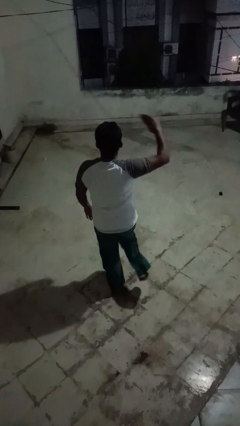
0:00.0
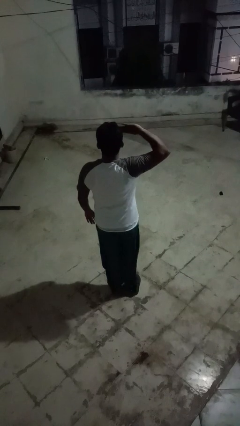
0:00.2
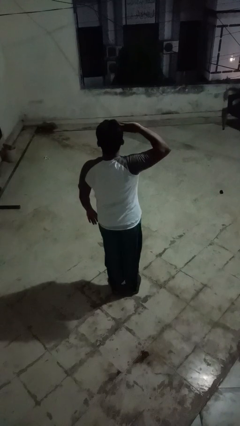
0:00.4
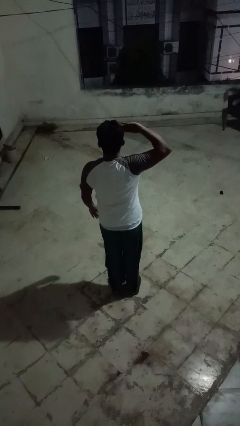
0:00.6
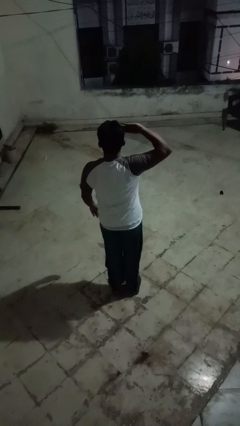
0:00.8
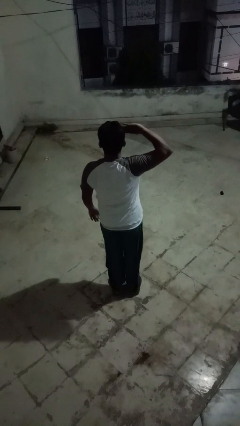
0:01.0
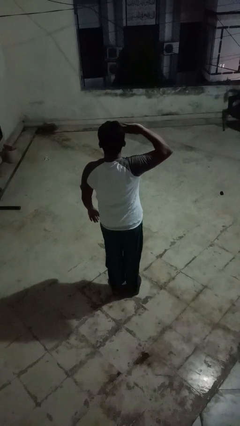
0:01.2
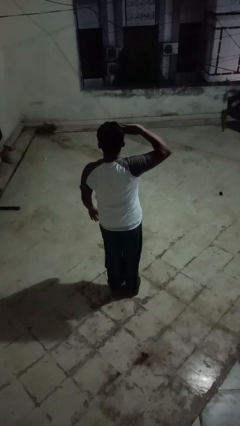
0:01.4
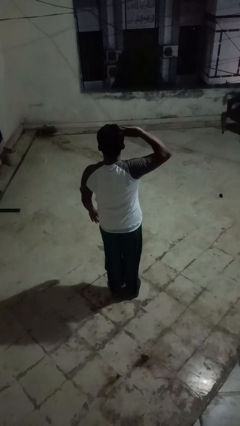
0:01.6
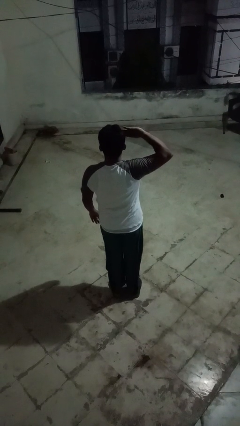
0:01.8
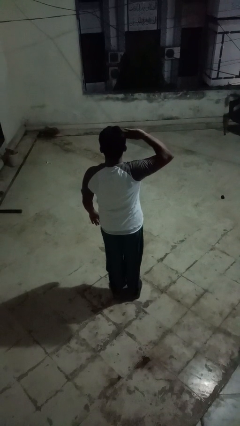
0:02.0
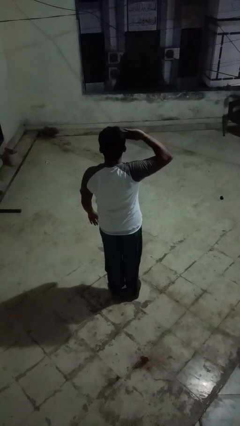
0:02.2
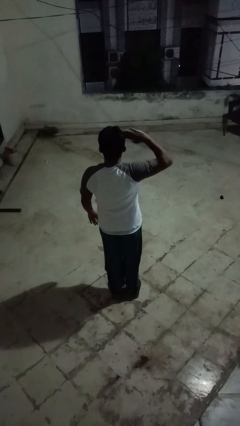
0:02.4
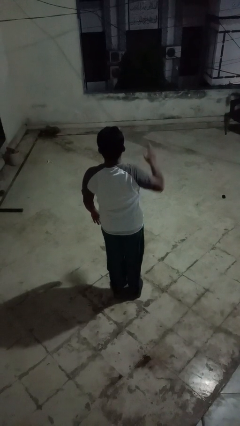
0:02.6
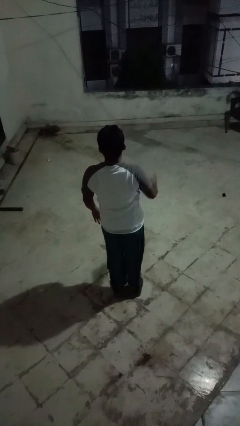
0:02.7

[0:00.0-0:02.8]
person salutes

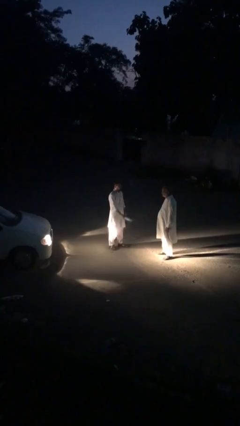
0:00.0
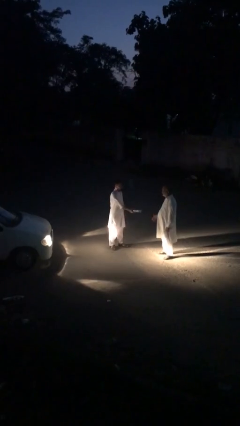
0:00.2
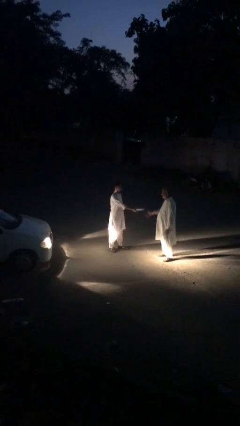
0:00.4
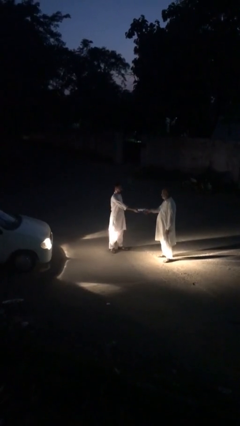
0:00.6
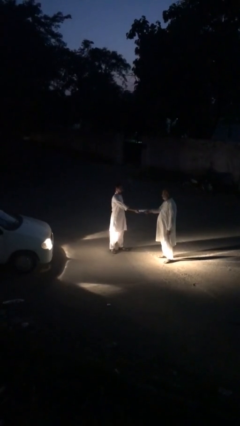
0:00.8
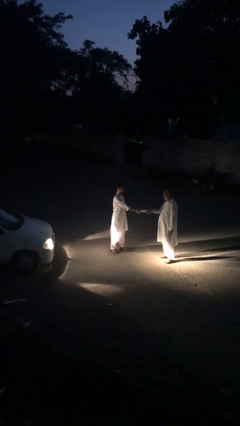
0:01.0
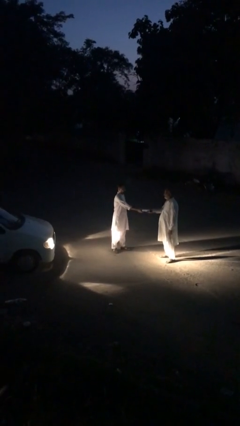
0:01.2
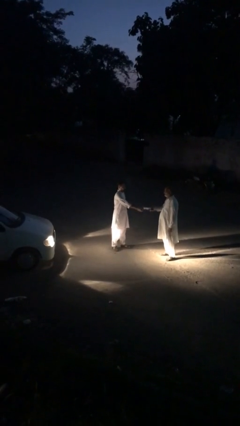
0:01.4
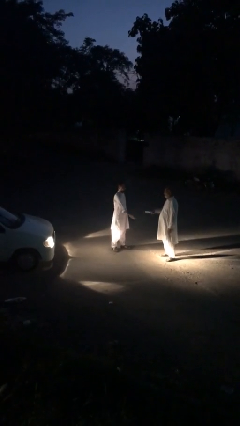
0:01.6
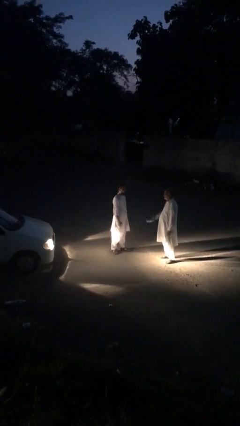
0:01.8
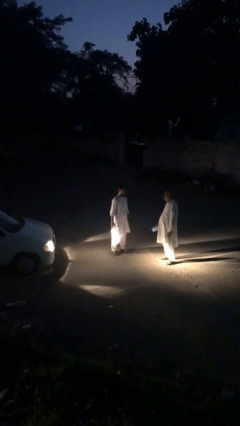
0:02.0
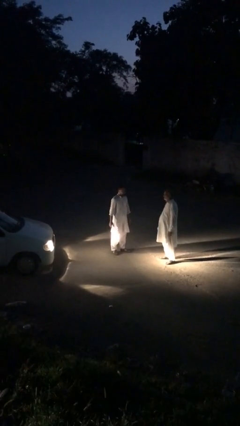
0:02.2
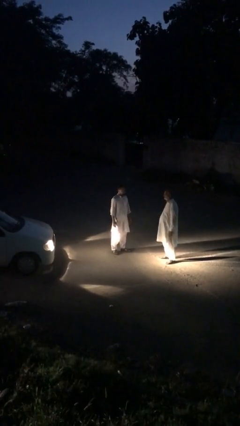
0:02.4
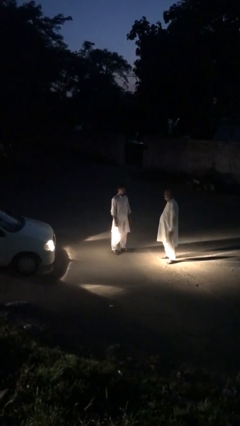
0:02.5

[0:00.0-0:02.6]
person transfers object to person

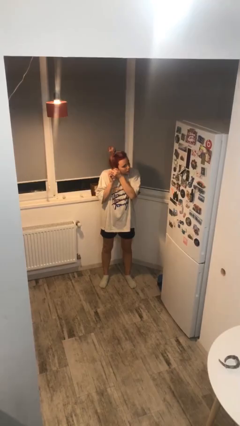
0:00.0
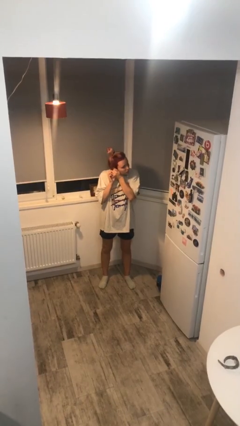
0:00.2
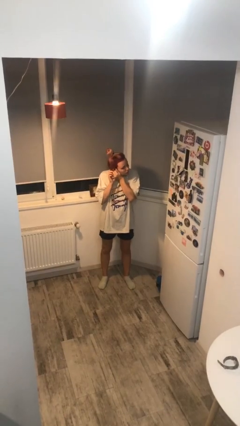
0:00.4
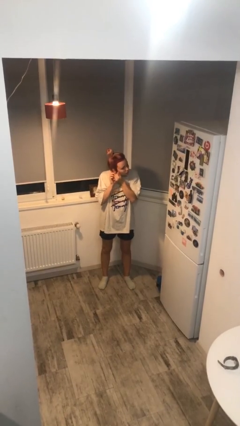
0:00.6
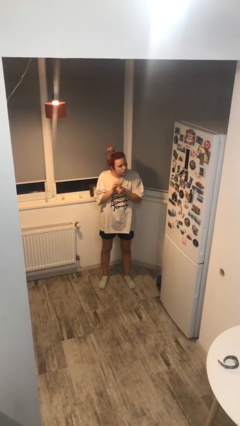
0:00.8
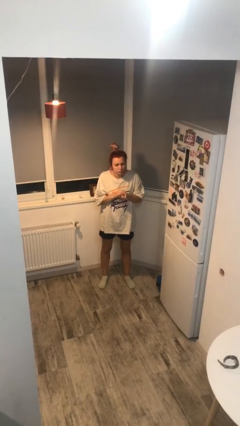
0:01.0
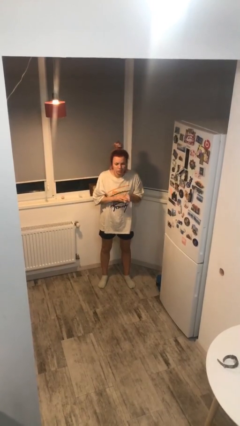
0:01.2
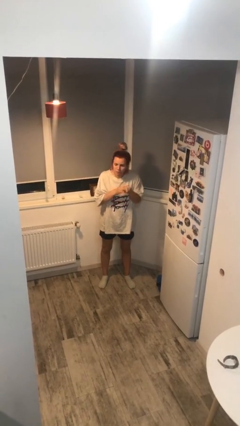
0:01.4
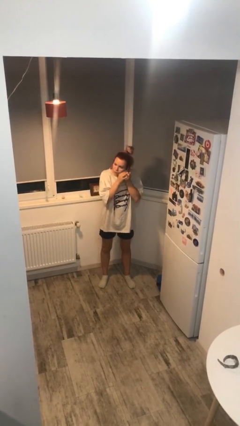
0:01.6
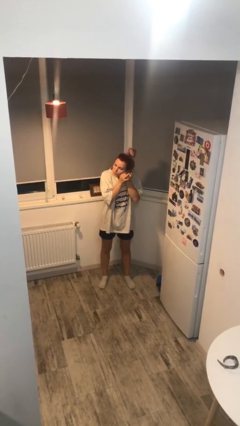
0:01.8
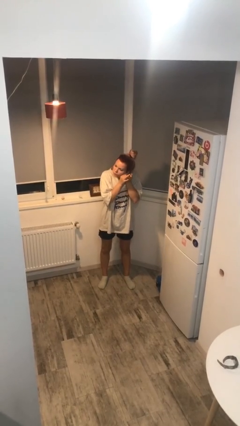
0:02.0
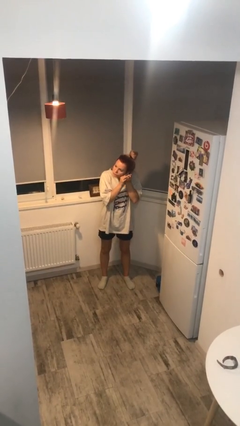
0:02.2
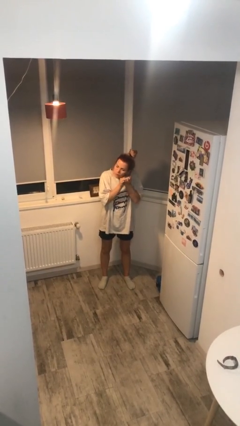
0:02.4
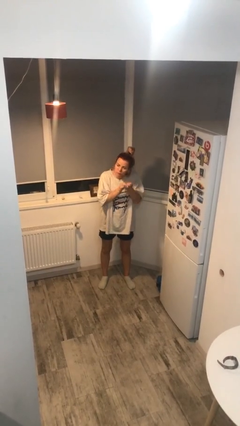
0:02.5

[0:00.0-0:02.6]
person takes off earrings

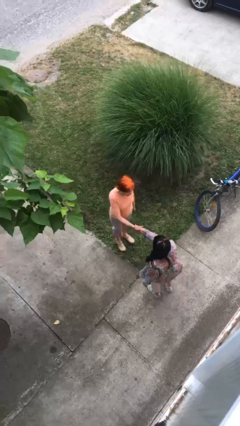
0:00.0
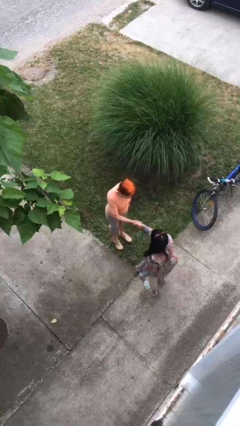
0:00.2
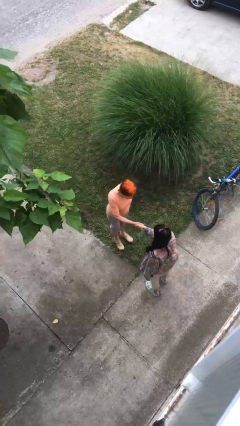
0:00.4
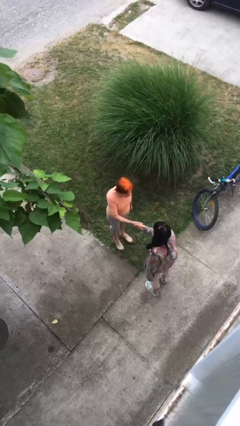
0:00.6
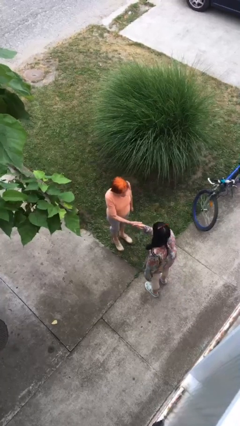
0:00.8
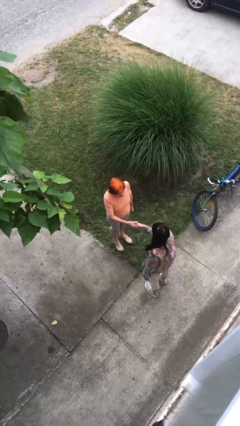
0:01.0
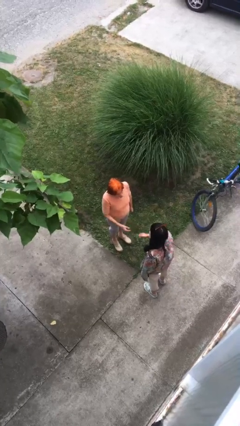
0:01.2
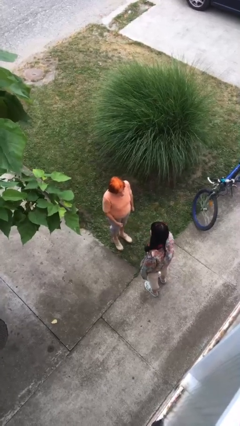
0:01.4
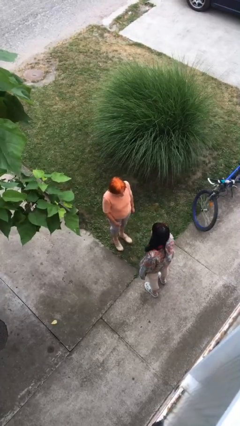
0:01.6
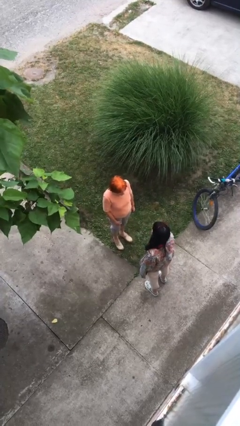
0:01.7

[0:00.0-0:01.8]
person shakes hand

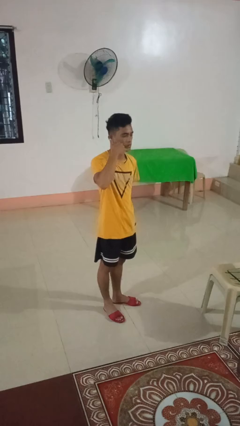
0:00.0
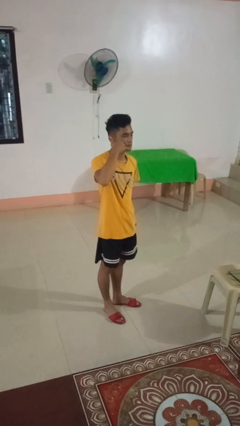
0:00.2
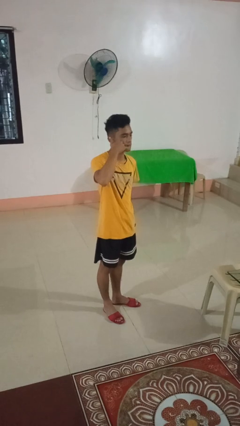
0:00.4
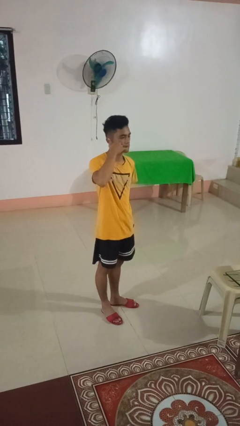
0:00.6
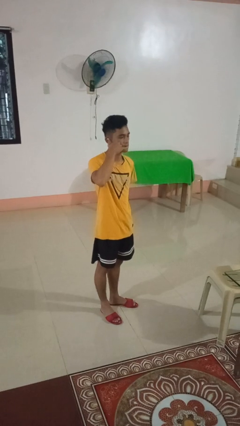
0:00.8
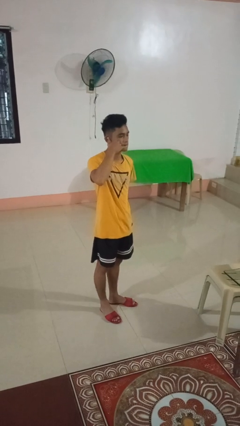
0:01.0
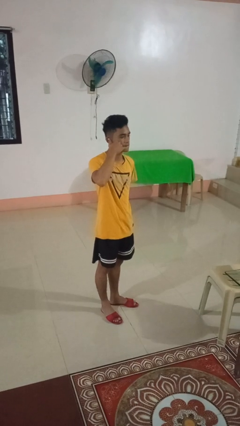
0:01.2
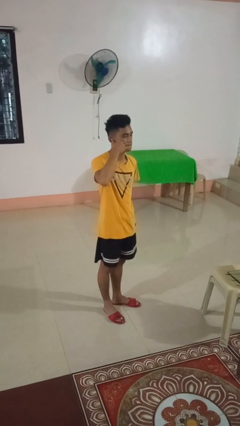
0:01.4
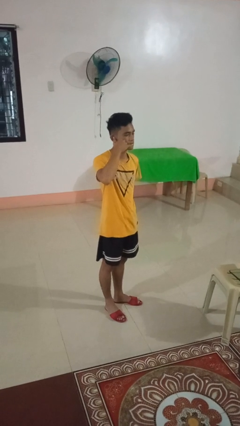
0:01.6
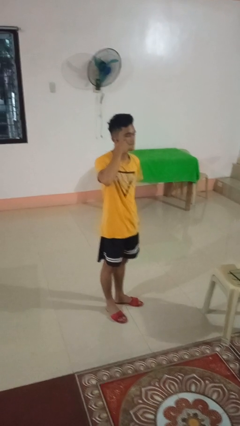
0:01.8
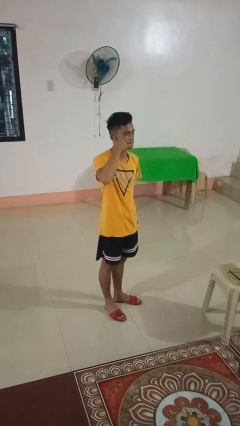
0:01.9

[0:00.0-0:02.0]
person gestures call me

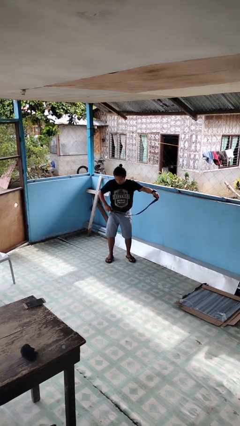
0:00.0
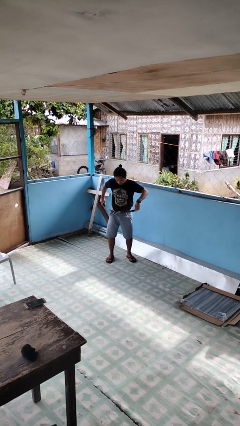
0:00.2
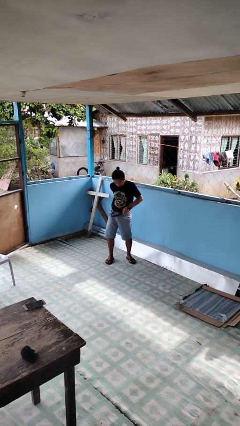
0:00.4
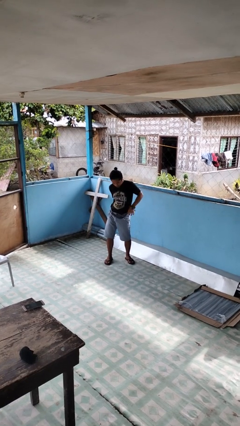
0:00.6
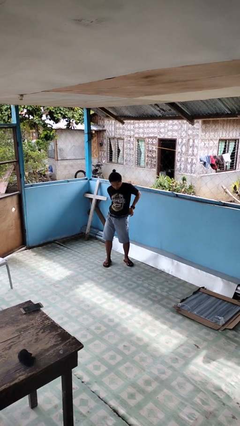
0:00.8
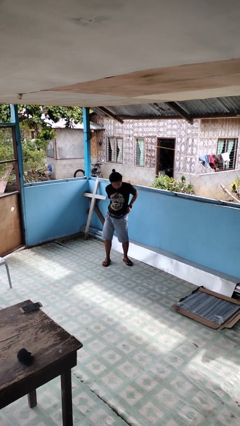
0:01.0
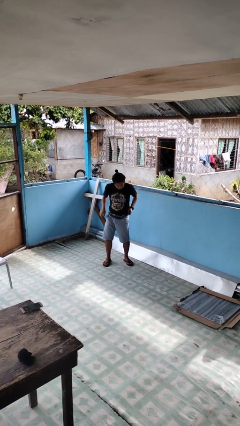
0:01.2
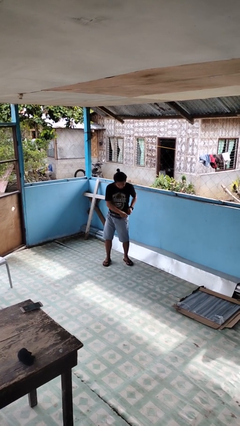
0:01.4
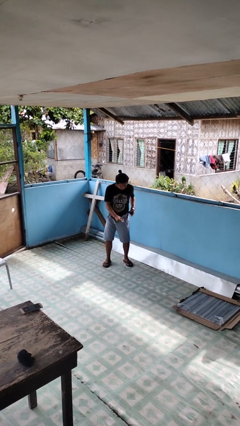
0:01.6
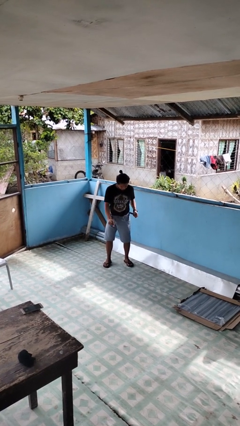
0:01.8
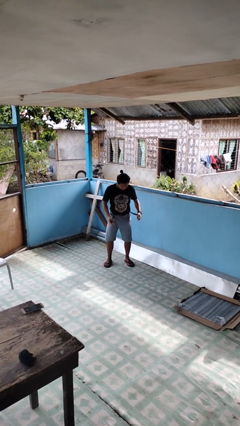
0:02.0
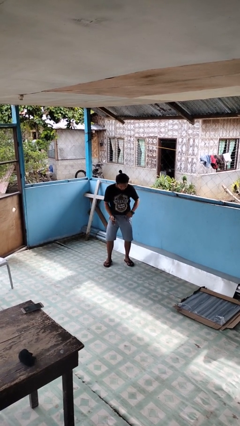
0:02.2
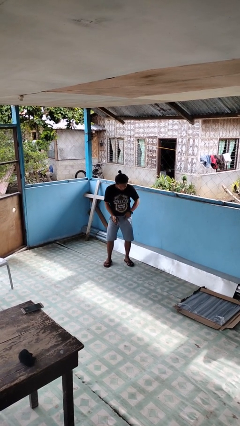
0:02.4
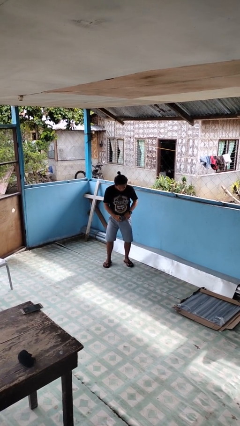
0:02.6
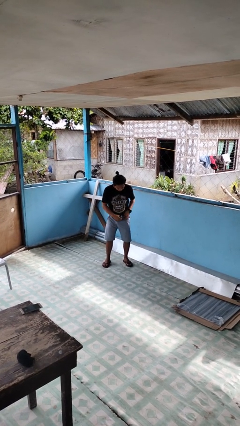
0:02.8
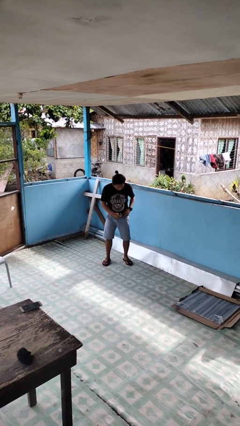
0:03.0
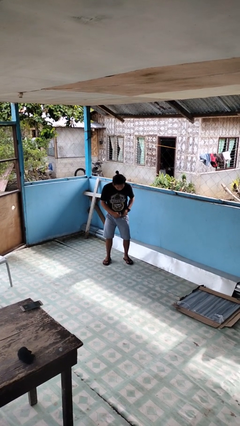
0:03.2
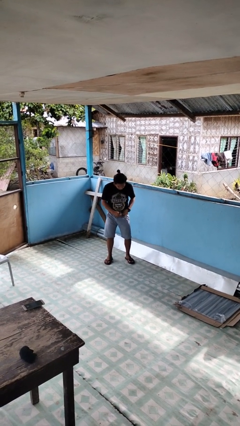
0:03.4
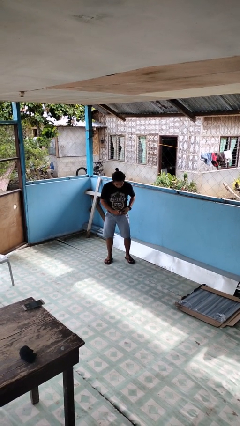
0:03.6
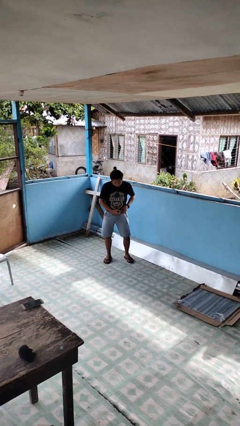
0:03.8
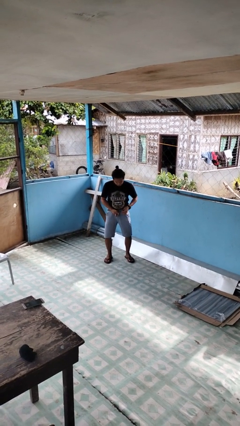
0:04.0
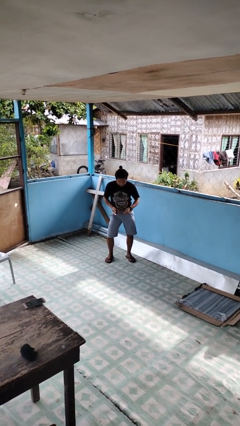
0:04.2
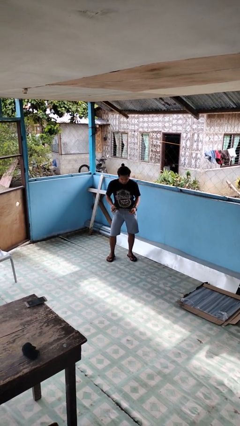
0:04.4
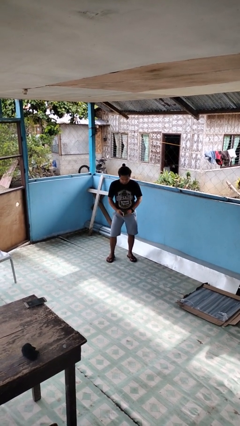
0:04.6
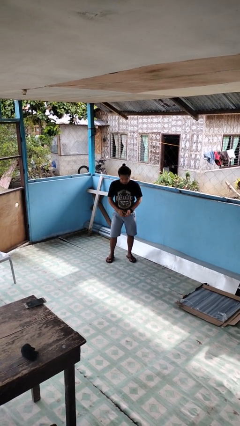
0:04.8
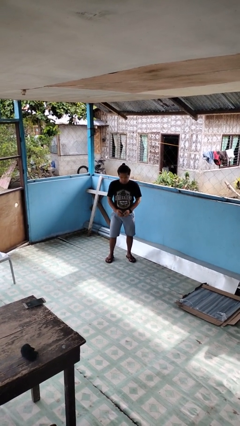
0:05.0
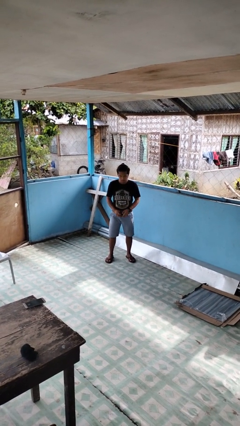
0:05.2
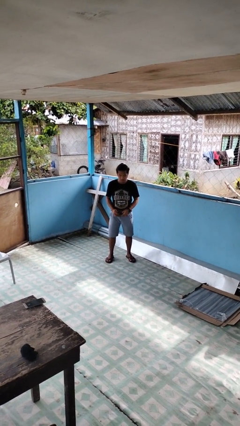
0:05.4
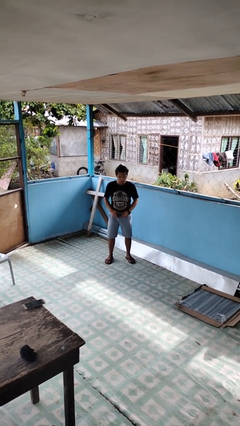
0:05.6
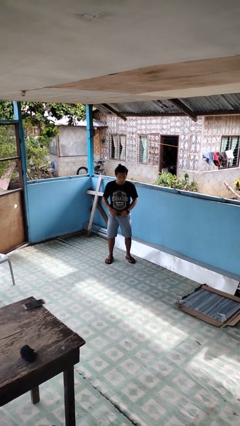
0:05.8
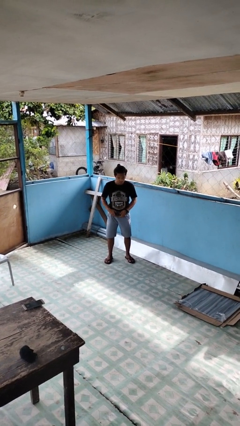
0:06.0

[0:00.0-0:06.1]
person puts on belt
